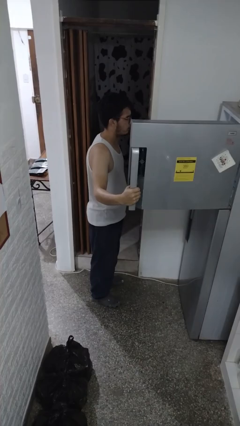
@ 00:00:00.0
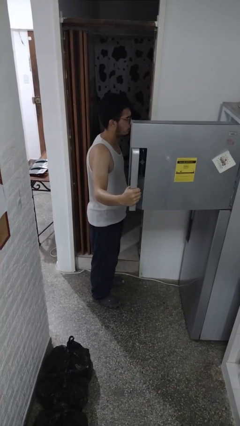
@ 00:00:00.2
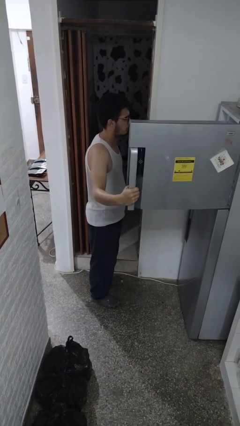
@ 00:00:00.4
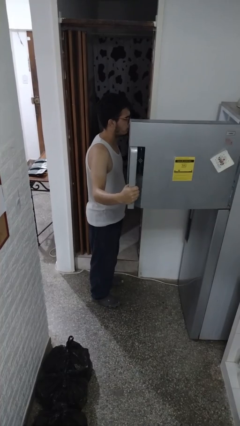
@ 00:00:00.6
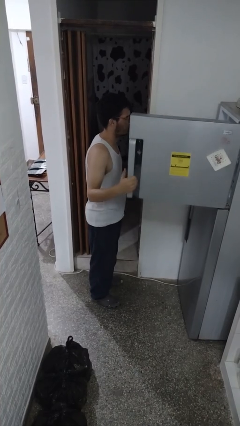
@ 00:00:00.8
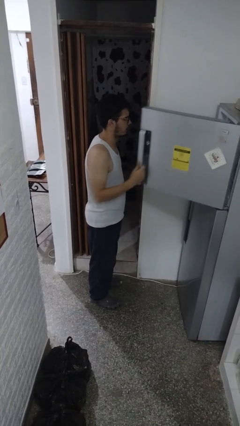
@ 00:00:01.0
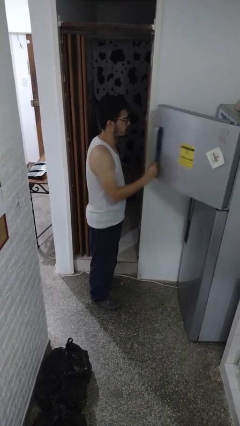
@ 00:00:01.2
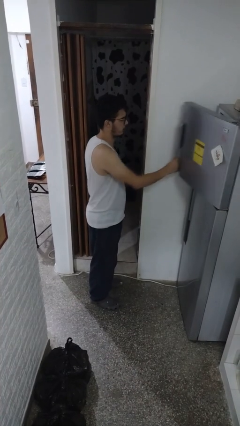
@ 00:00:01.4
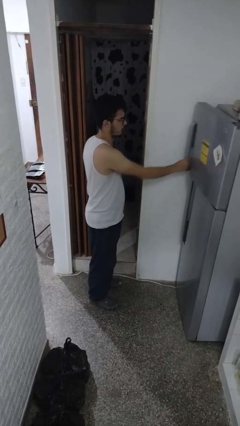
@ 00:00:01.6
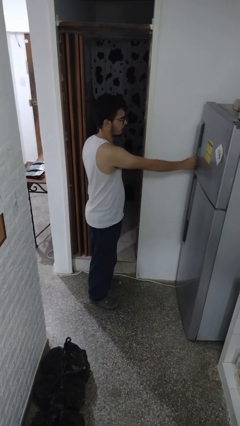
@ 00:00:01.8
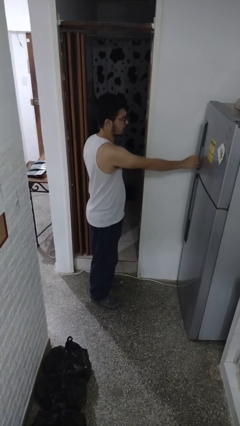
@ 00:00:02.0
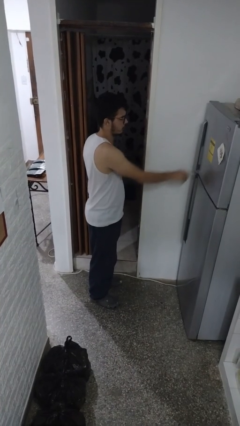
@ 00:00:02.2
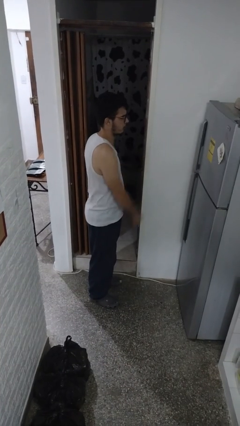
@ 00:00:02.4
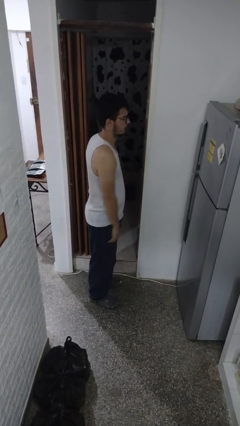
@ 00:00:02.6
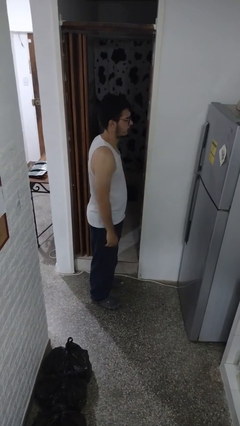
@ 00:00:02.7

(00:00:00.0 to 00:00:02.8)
person closes refrigerator

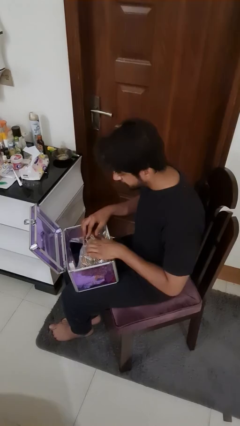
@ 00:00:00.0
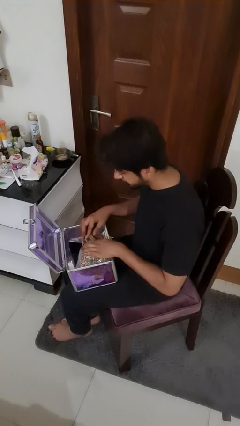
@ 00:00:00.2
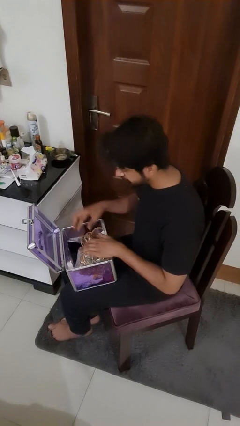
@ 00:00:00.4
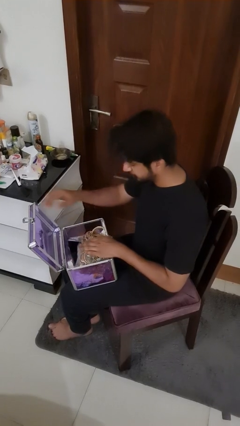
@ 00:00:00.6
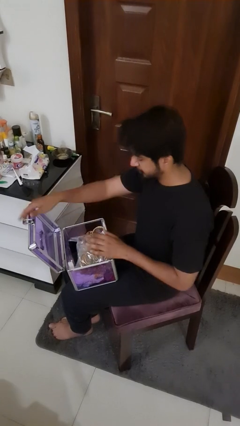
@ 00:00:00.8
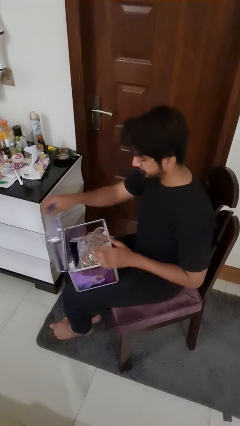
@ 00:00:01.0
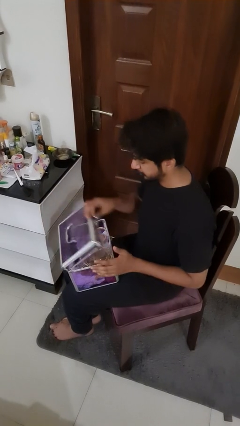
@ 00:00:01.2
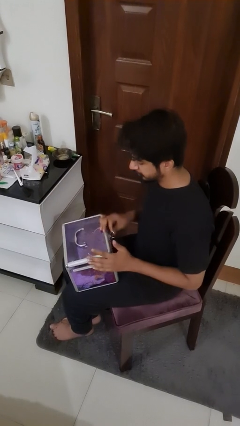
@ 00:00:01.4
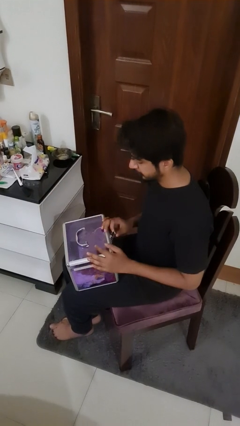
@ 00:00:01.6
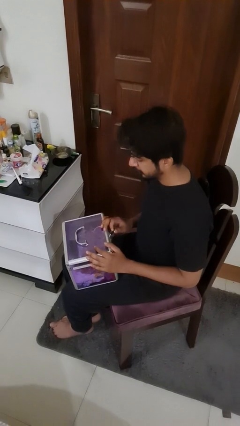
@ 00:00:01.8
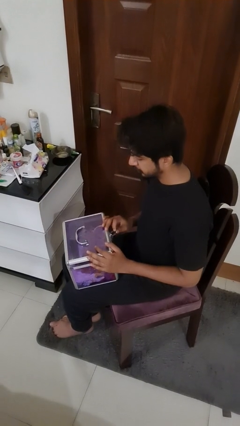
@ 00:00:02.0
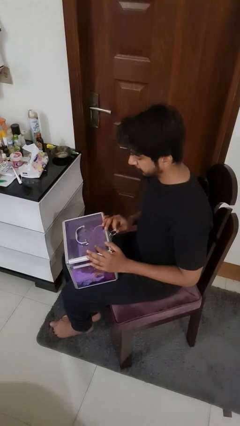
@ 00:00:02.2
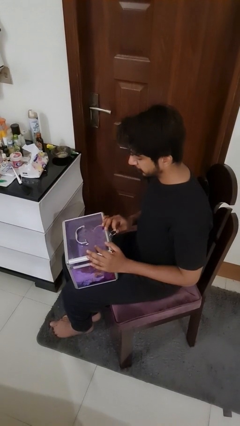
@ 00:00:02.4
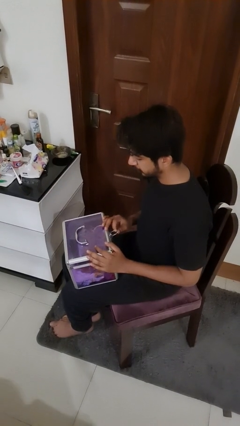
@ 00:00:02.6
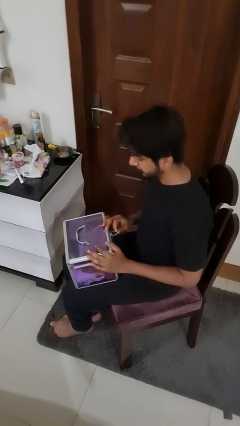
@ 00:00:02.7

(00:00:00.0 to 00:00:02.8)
person closes jewelry box

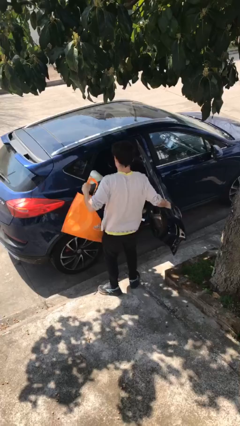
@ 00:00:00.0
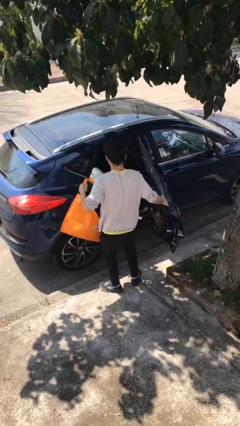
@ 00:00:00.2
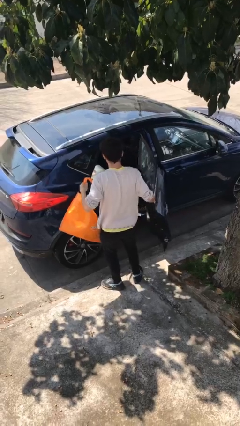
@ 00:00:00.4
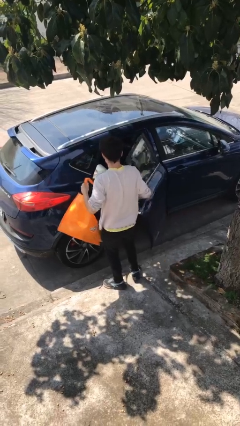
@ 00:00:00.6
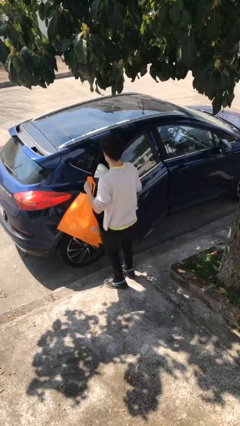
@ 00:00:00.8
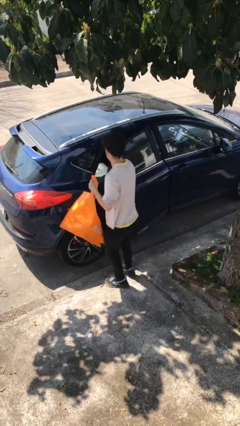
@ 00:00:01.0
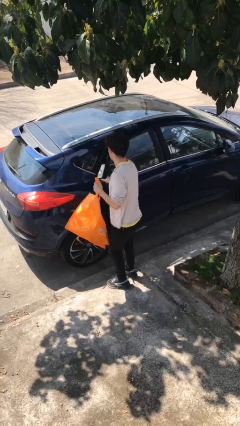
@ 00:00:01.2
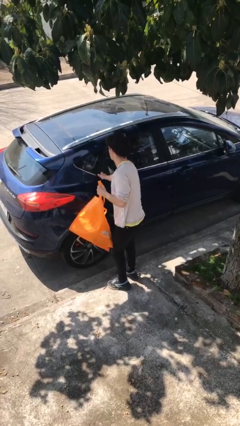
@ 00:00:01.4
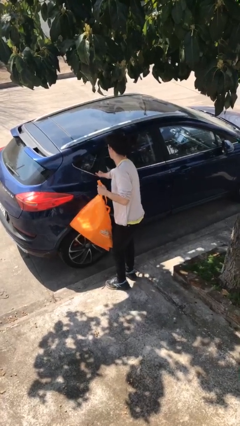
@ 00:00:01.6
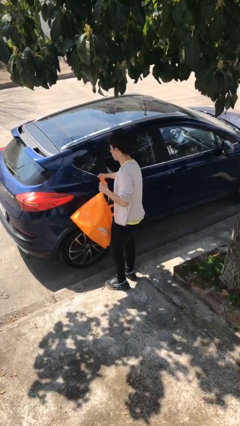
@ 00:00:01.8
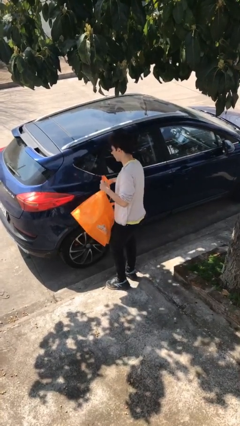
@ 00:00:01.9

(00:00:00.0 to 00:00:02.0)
person closes car door

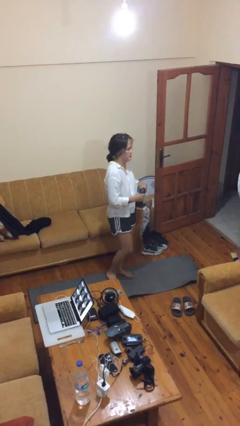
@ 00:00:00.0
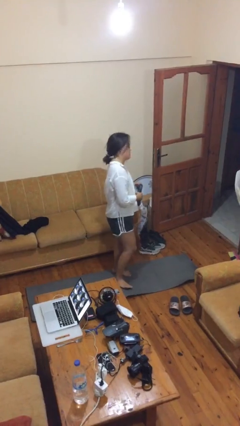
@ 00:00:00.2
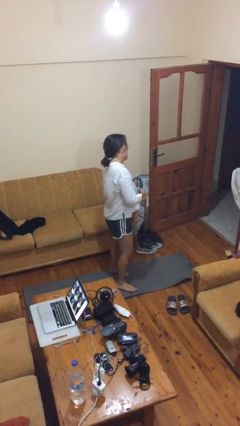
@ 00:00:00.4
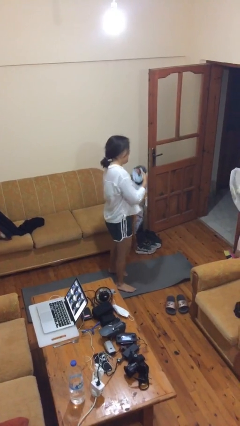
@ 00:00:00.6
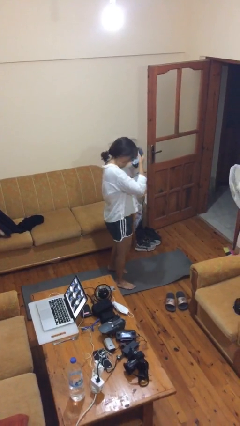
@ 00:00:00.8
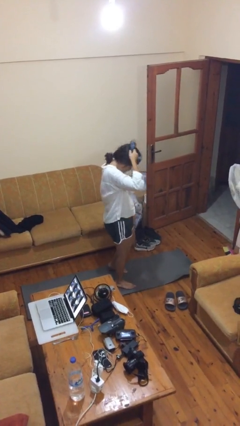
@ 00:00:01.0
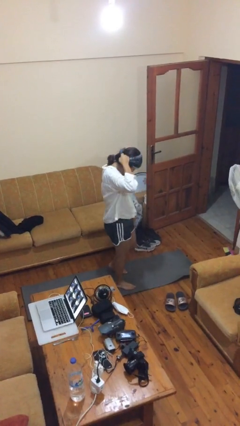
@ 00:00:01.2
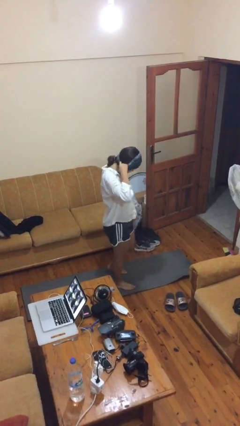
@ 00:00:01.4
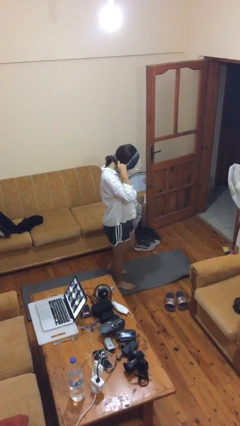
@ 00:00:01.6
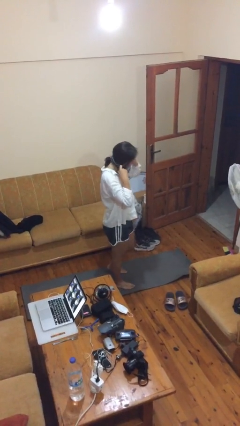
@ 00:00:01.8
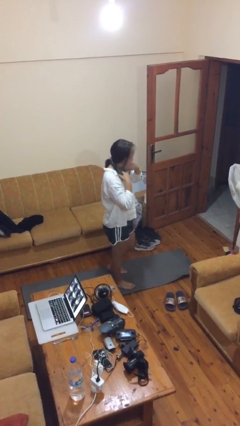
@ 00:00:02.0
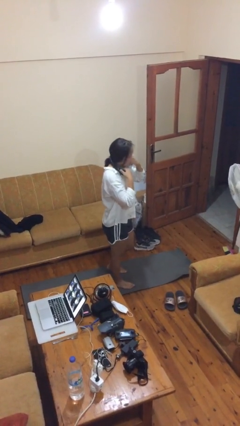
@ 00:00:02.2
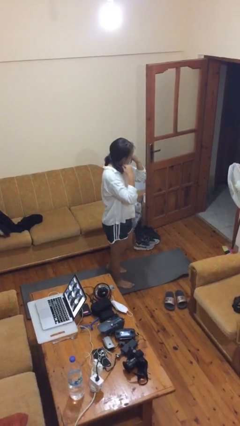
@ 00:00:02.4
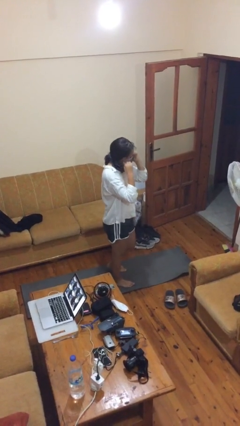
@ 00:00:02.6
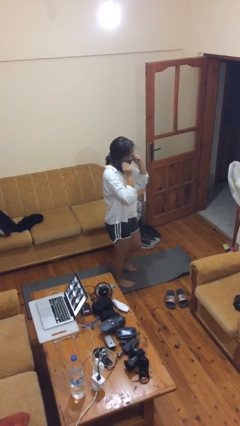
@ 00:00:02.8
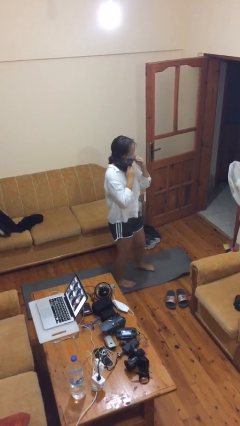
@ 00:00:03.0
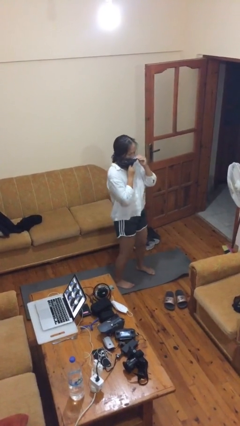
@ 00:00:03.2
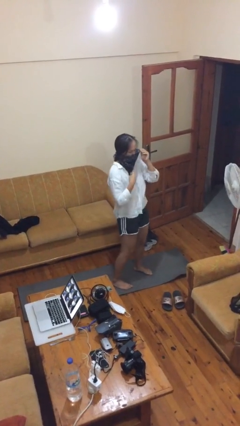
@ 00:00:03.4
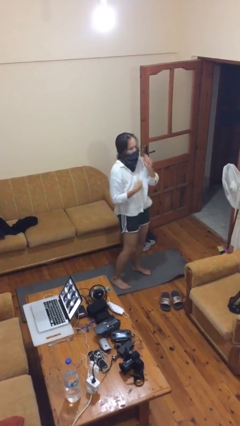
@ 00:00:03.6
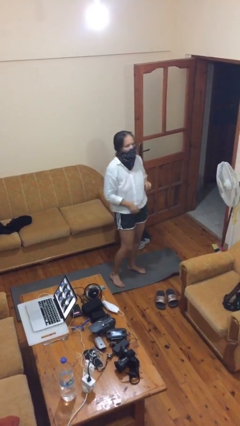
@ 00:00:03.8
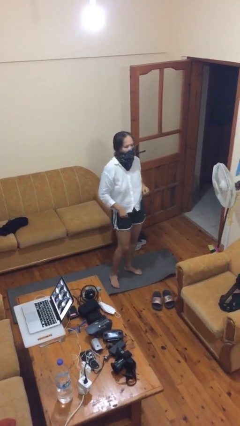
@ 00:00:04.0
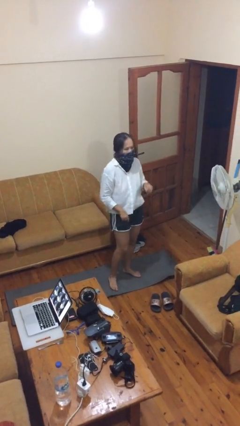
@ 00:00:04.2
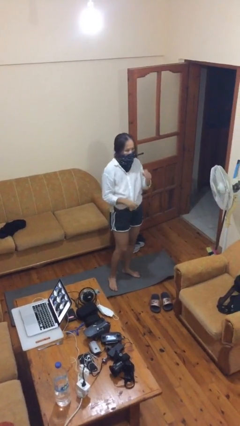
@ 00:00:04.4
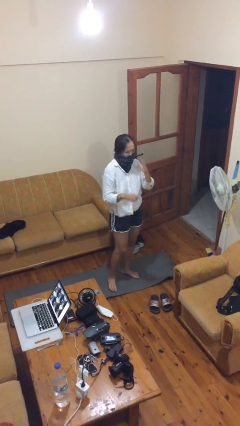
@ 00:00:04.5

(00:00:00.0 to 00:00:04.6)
person puts on scarf

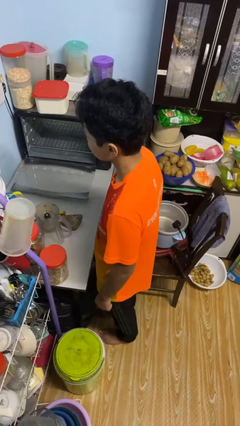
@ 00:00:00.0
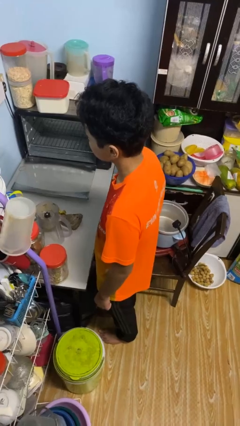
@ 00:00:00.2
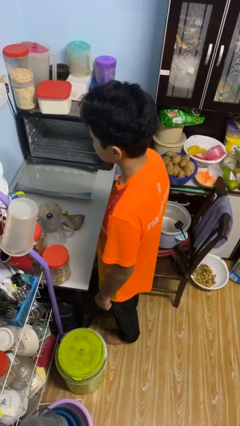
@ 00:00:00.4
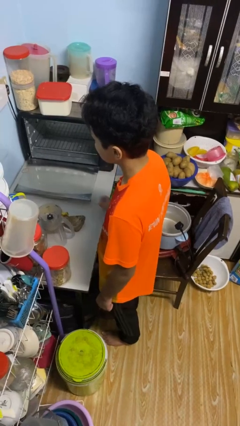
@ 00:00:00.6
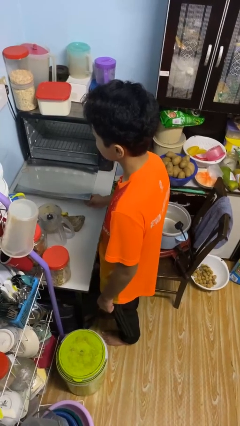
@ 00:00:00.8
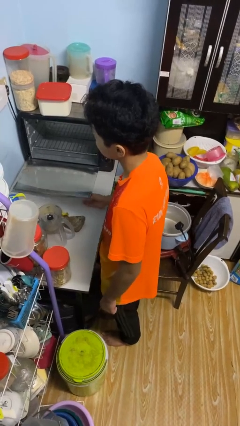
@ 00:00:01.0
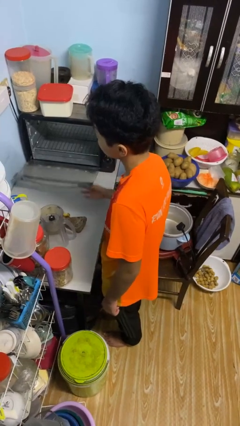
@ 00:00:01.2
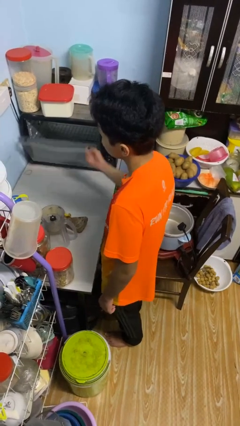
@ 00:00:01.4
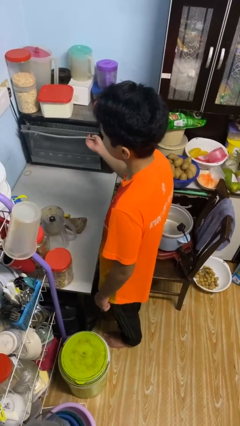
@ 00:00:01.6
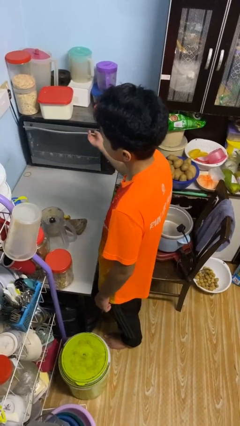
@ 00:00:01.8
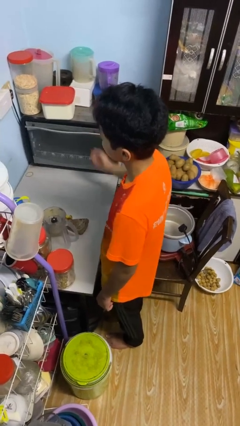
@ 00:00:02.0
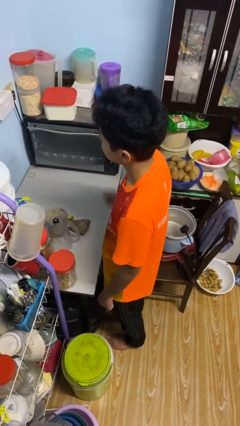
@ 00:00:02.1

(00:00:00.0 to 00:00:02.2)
person closes oven door

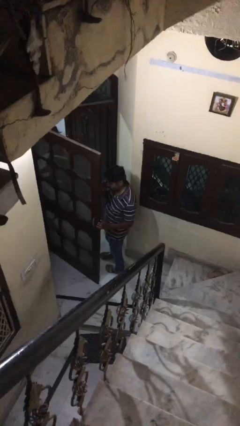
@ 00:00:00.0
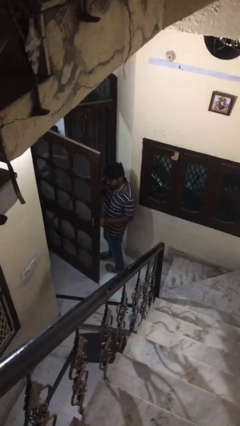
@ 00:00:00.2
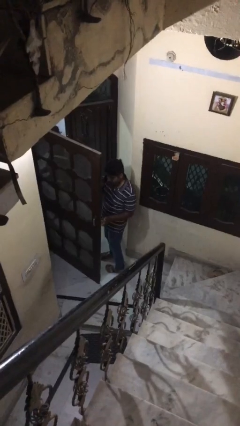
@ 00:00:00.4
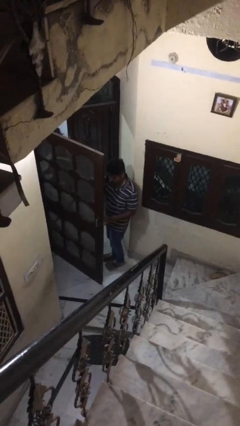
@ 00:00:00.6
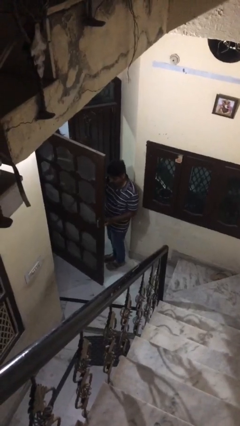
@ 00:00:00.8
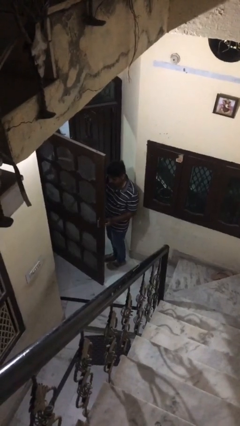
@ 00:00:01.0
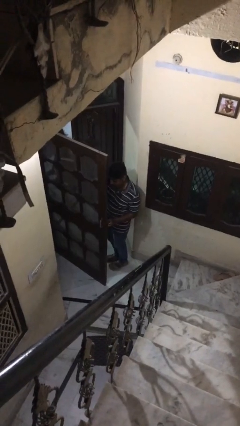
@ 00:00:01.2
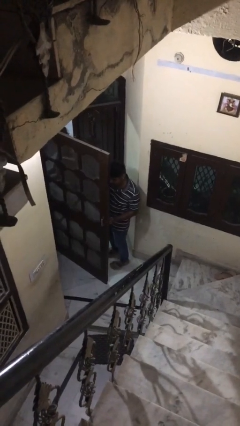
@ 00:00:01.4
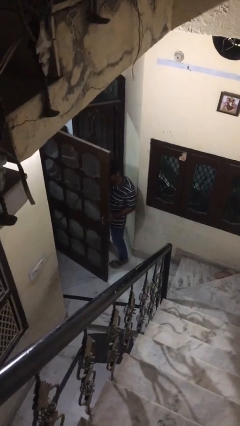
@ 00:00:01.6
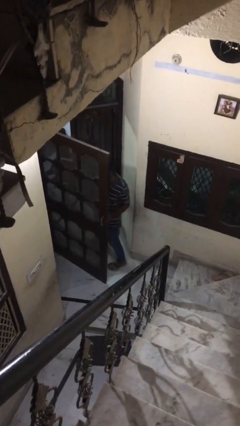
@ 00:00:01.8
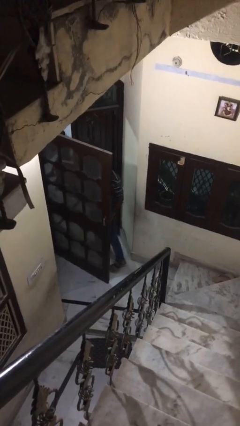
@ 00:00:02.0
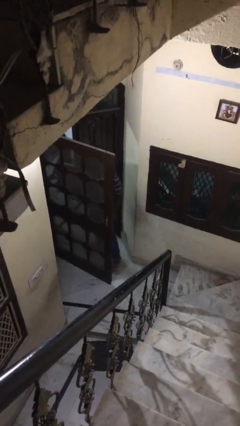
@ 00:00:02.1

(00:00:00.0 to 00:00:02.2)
person exits scene through structure

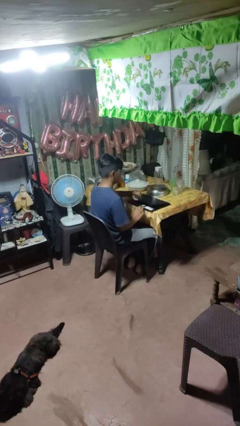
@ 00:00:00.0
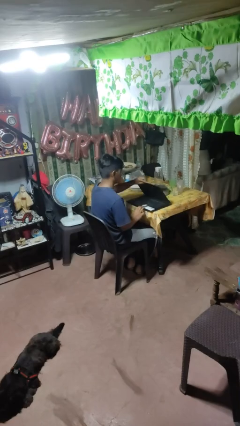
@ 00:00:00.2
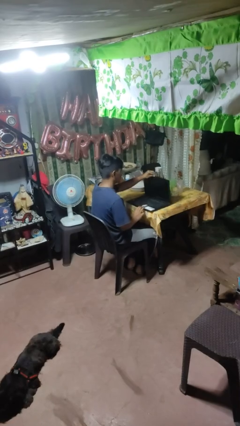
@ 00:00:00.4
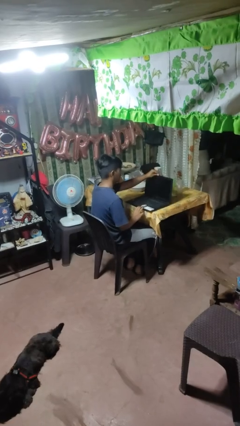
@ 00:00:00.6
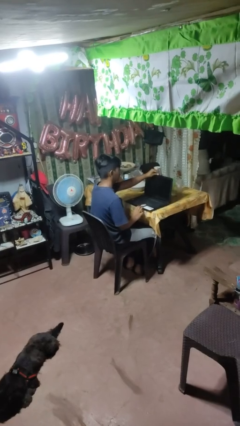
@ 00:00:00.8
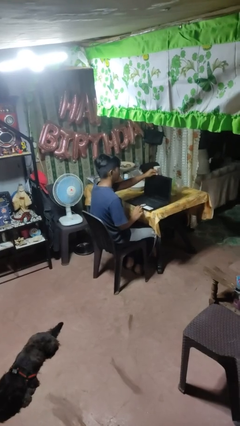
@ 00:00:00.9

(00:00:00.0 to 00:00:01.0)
person opens laptop
